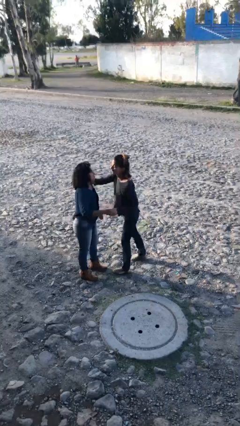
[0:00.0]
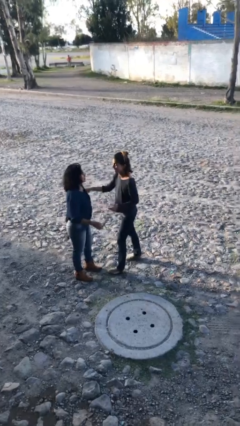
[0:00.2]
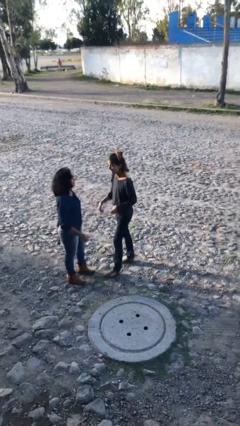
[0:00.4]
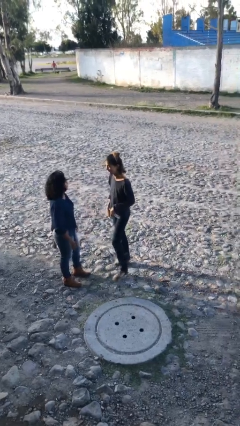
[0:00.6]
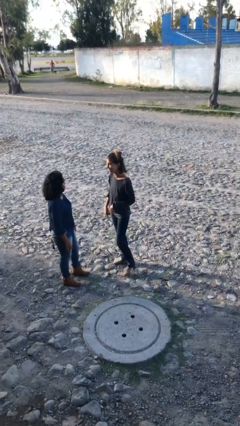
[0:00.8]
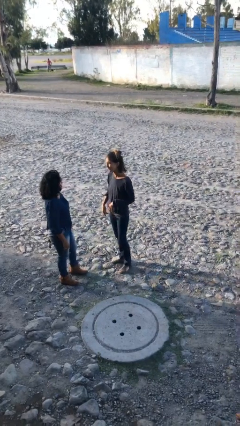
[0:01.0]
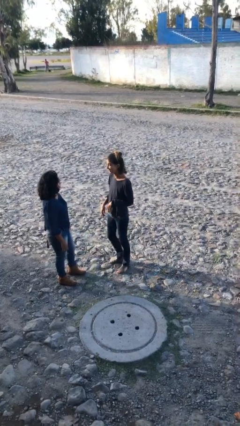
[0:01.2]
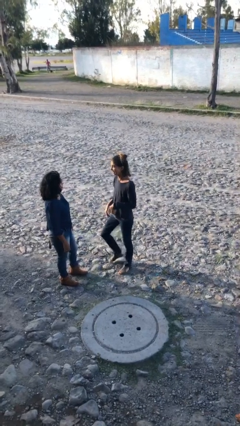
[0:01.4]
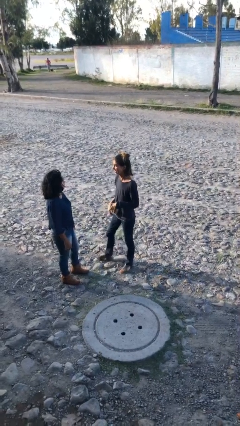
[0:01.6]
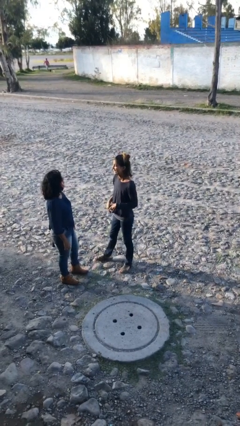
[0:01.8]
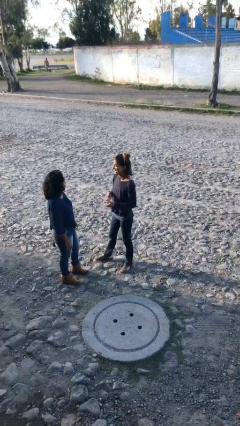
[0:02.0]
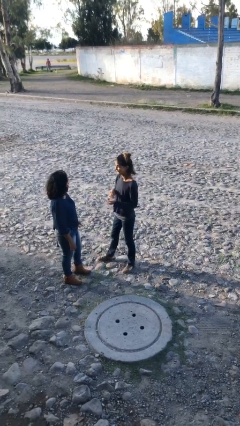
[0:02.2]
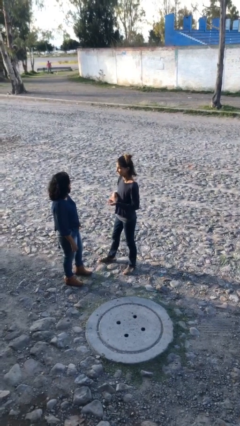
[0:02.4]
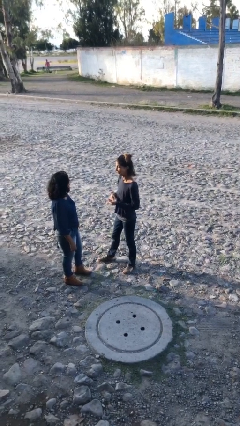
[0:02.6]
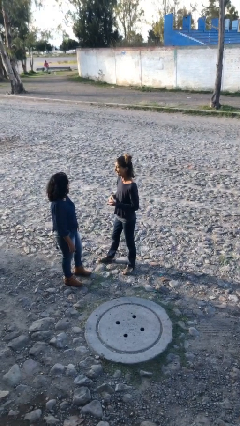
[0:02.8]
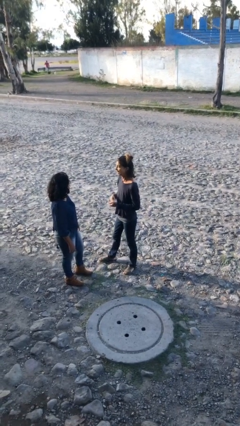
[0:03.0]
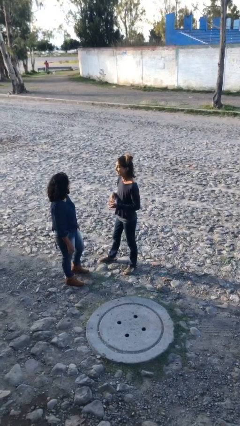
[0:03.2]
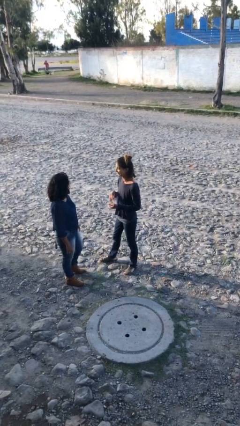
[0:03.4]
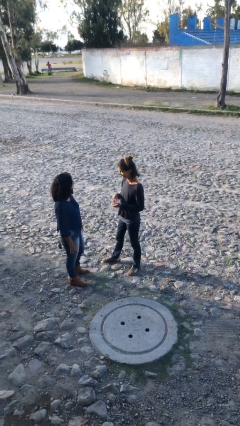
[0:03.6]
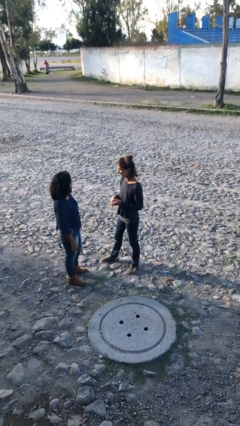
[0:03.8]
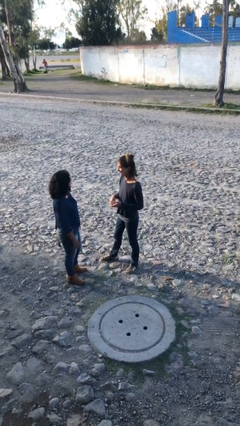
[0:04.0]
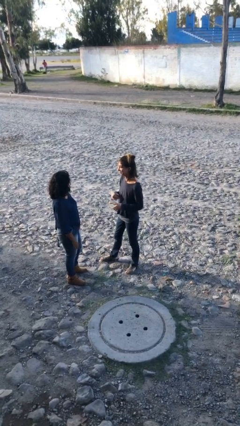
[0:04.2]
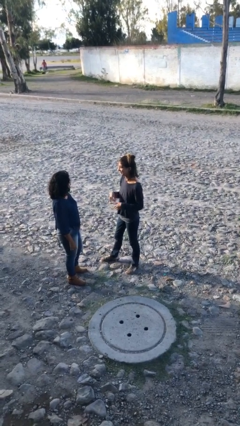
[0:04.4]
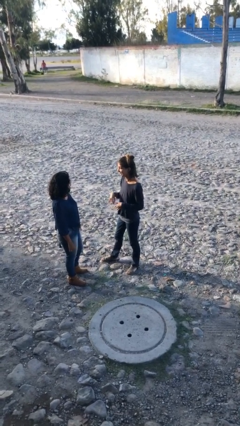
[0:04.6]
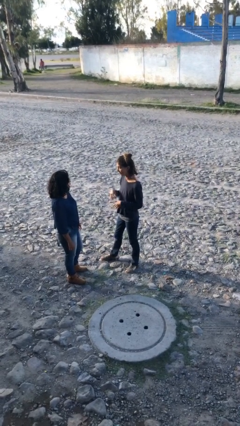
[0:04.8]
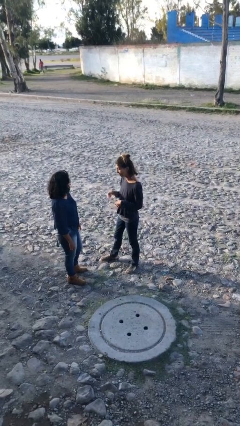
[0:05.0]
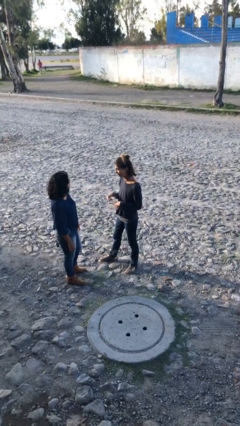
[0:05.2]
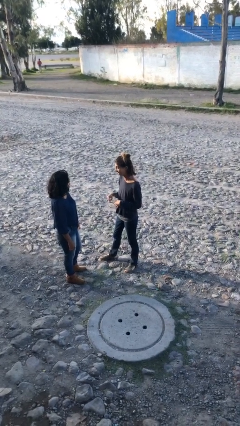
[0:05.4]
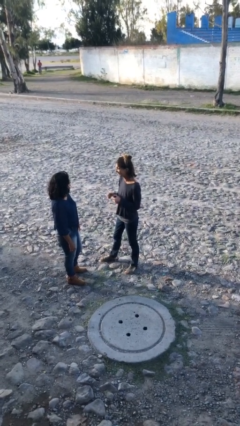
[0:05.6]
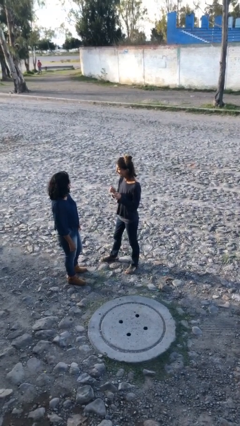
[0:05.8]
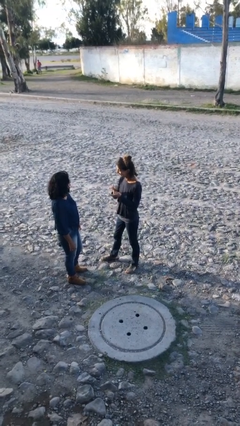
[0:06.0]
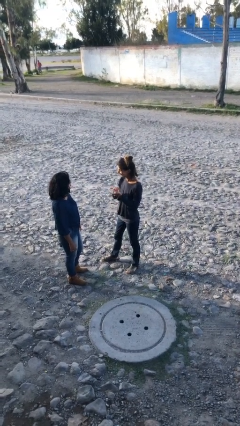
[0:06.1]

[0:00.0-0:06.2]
person talks to person

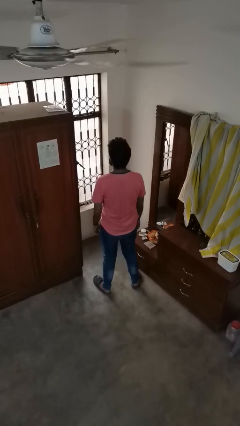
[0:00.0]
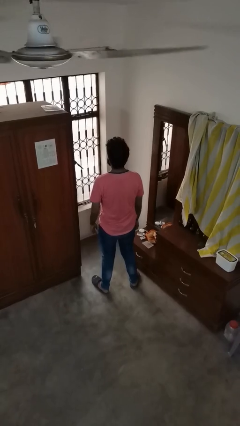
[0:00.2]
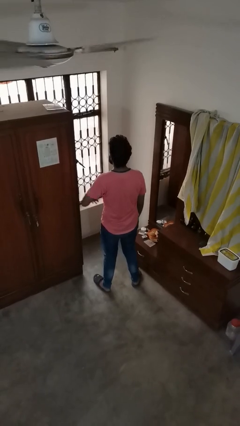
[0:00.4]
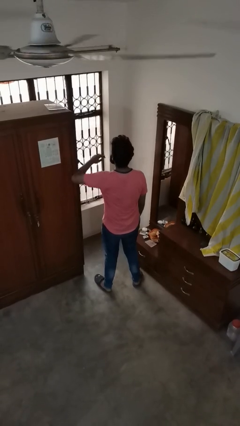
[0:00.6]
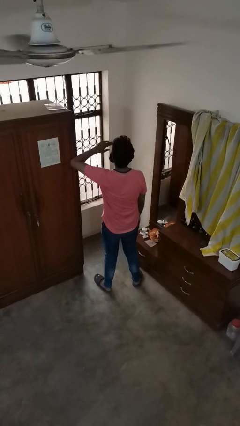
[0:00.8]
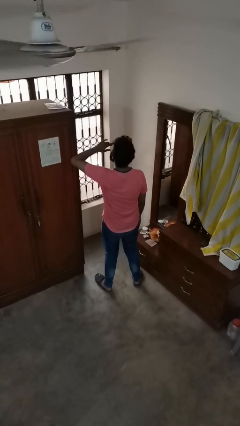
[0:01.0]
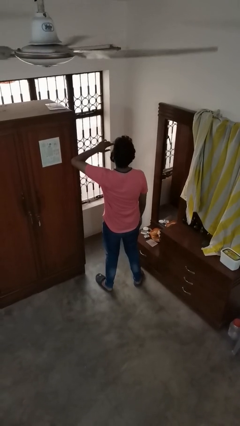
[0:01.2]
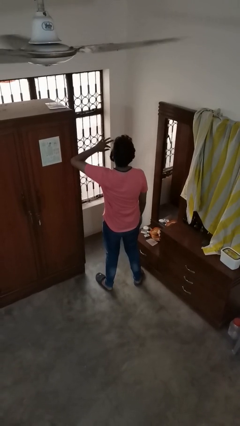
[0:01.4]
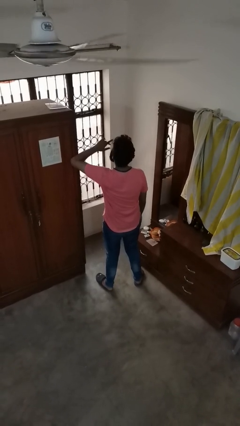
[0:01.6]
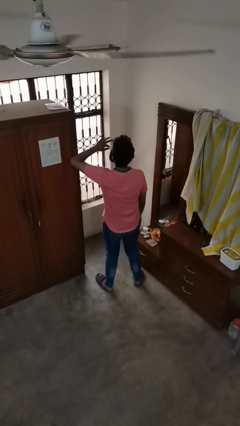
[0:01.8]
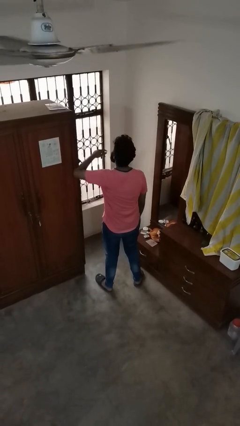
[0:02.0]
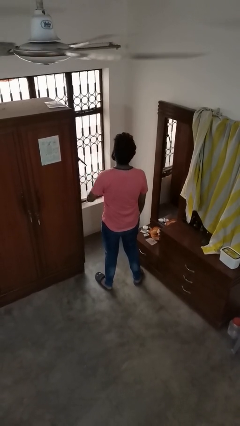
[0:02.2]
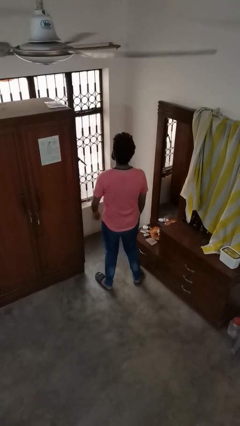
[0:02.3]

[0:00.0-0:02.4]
person yawns

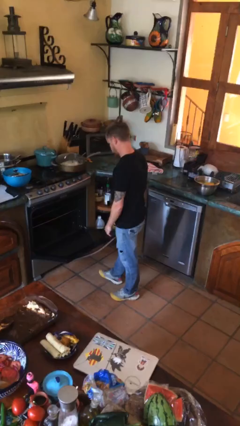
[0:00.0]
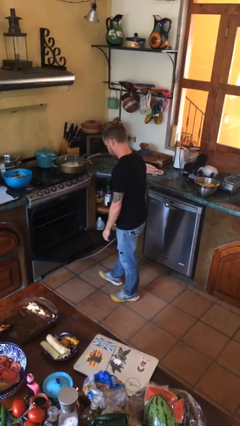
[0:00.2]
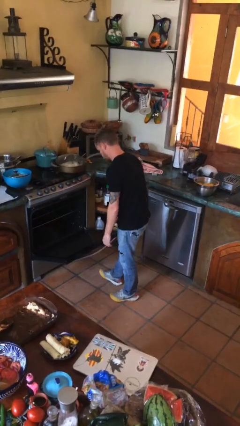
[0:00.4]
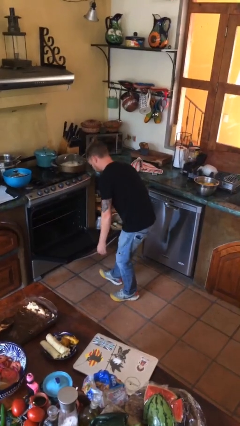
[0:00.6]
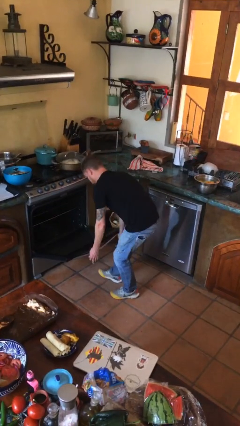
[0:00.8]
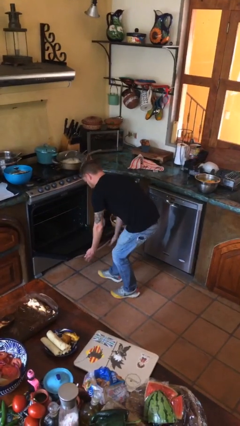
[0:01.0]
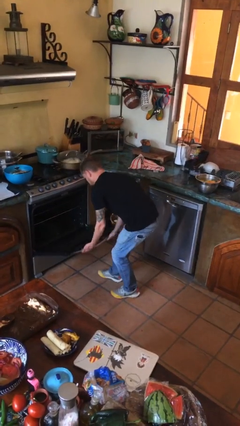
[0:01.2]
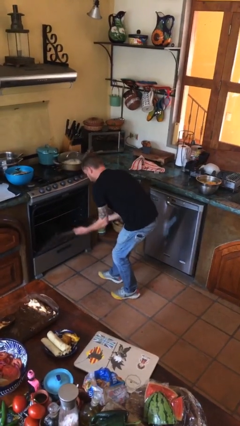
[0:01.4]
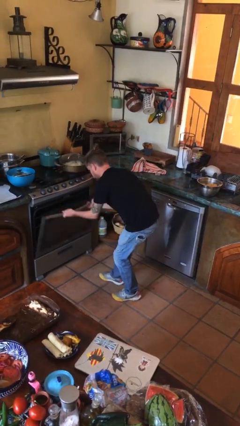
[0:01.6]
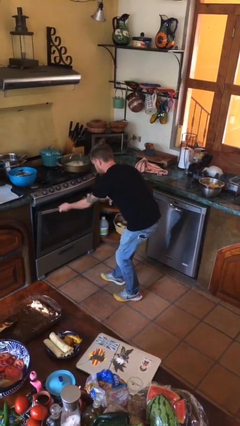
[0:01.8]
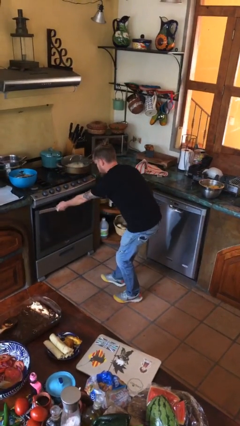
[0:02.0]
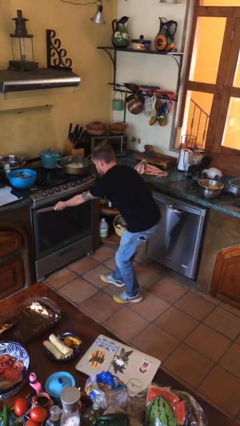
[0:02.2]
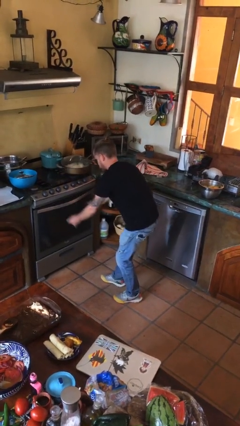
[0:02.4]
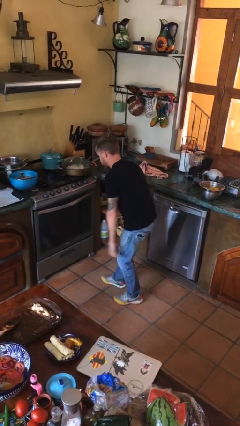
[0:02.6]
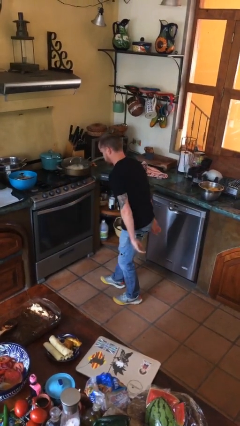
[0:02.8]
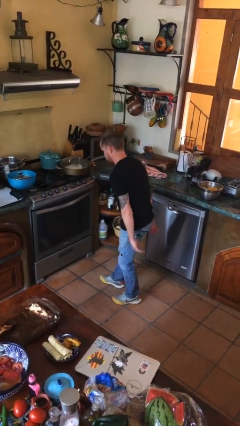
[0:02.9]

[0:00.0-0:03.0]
person closes oven door

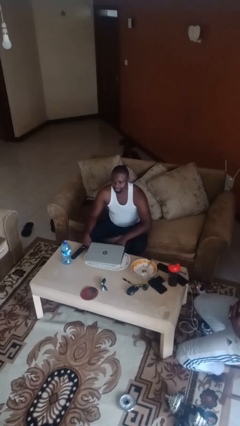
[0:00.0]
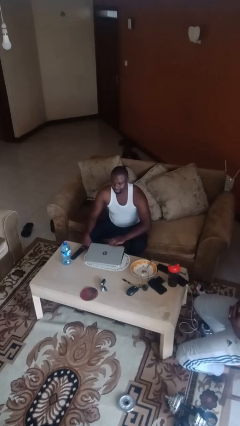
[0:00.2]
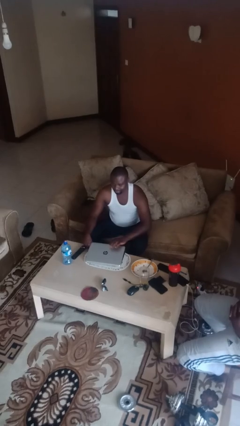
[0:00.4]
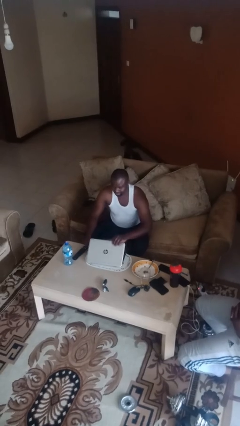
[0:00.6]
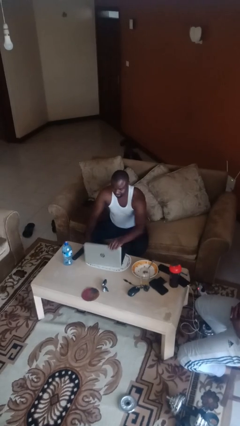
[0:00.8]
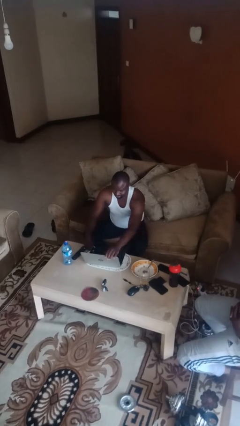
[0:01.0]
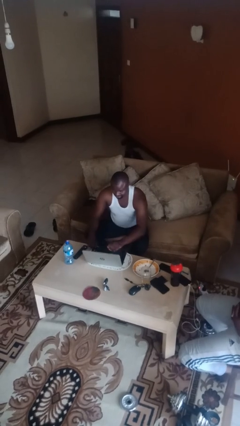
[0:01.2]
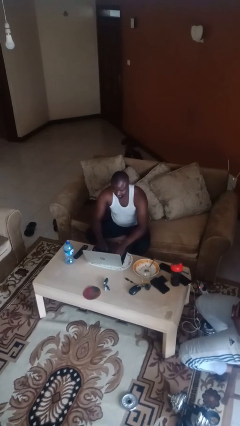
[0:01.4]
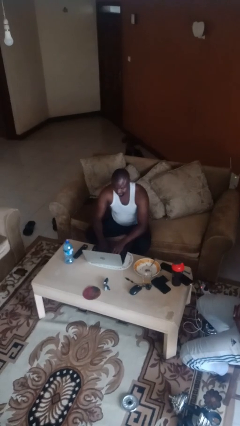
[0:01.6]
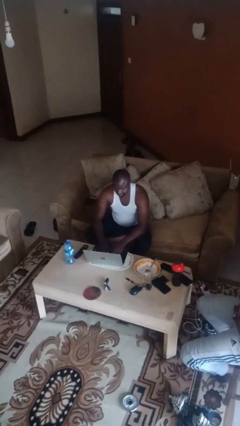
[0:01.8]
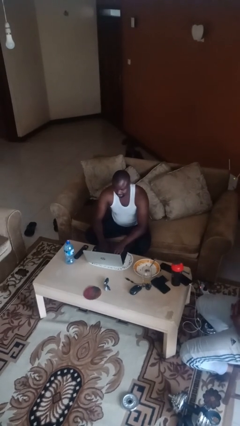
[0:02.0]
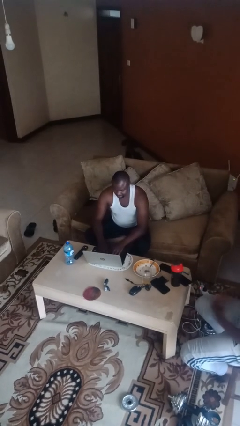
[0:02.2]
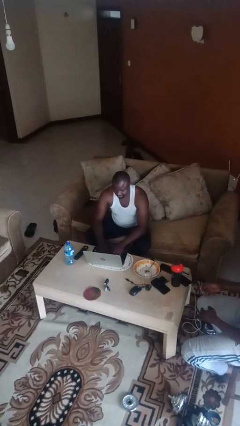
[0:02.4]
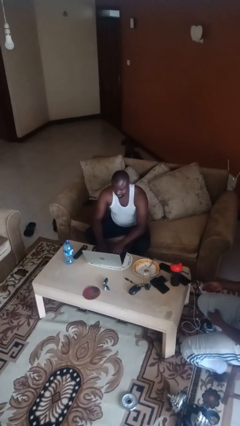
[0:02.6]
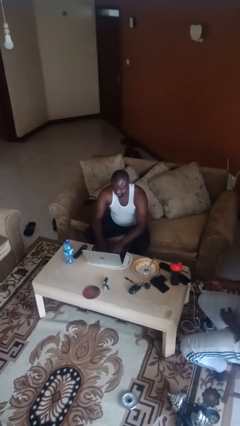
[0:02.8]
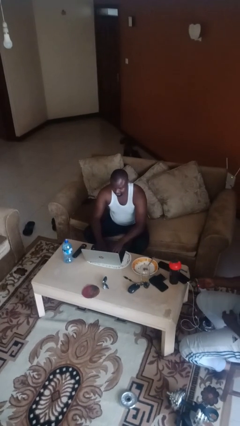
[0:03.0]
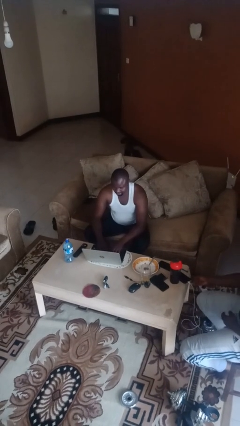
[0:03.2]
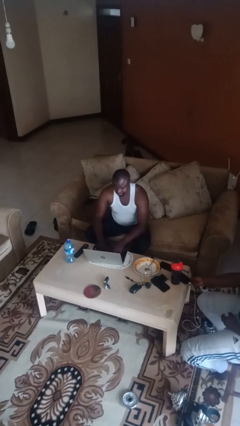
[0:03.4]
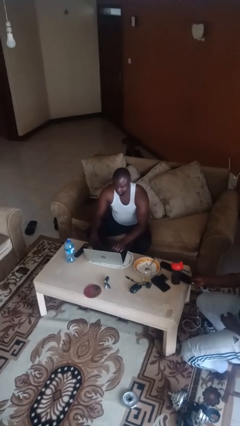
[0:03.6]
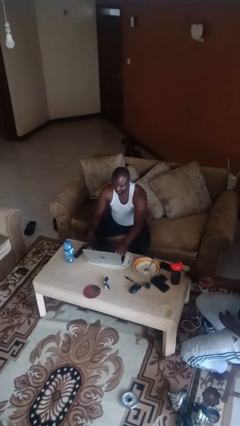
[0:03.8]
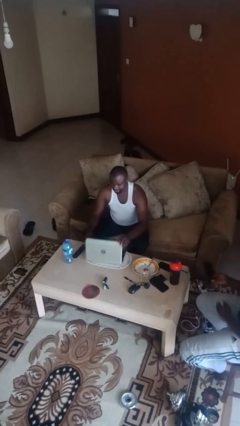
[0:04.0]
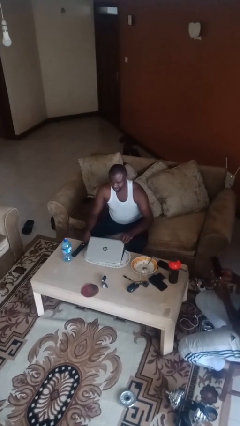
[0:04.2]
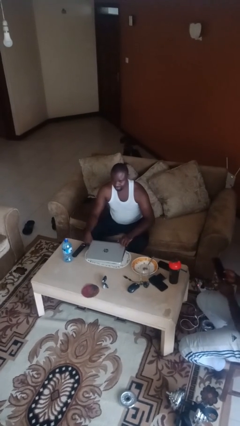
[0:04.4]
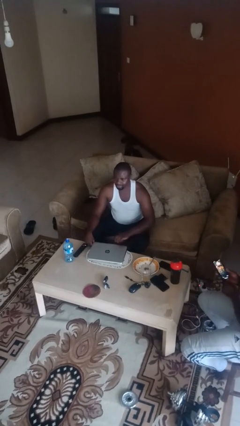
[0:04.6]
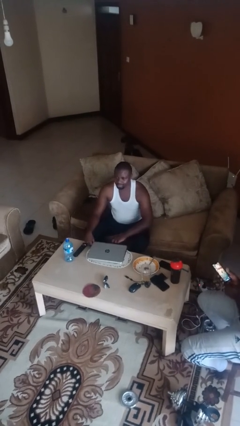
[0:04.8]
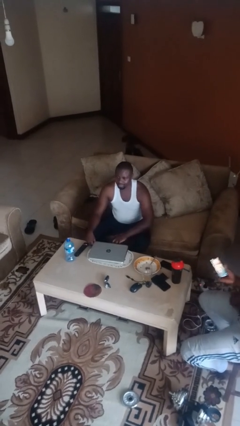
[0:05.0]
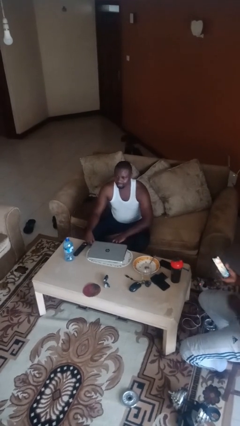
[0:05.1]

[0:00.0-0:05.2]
person interacts with laptop

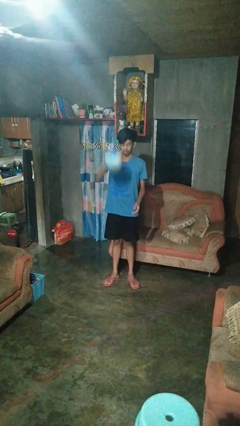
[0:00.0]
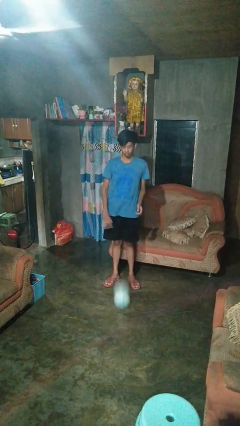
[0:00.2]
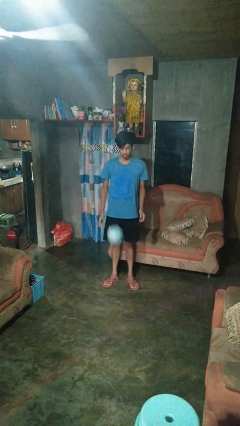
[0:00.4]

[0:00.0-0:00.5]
person bounces ball on floor

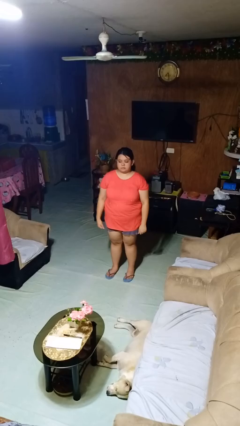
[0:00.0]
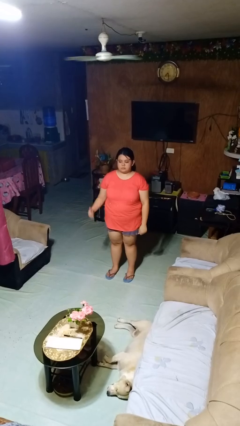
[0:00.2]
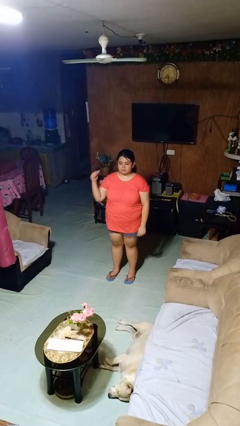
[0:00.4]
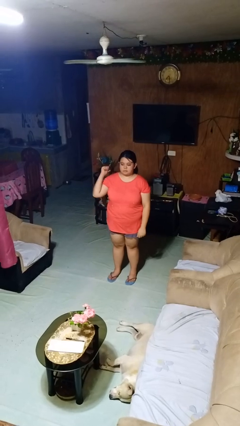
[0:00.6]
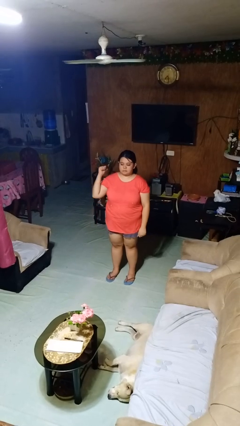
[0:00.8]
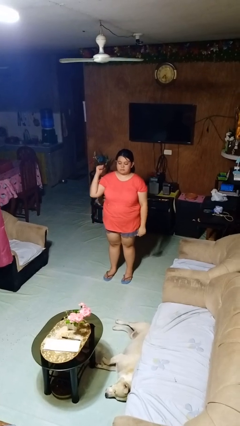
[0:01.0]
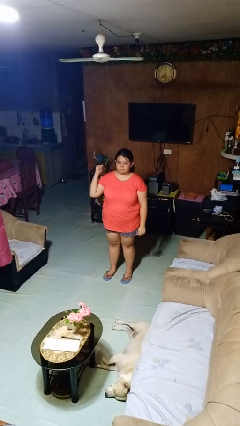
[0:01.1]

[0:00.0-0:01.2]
person gestures behind me
